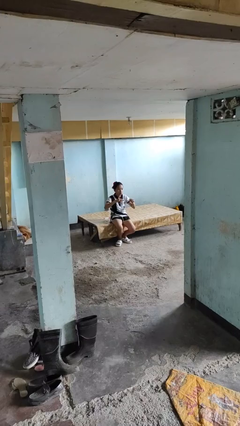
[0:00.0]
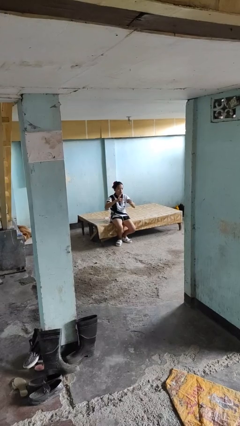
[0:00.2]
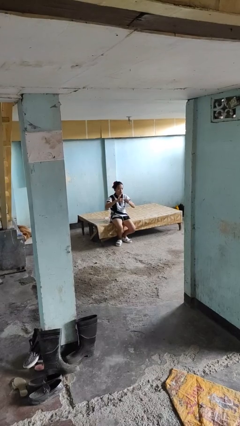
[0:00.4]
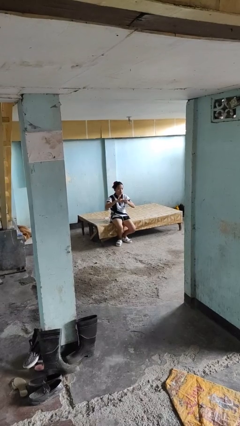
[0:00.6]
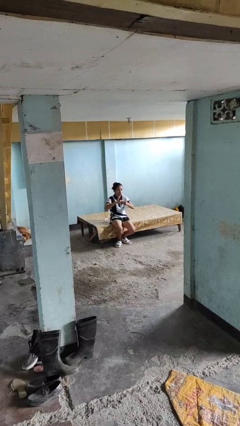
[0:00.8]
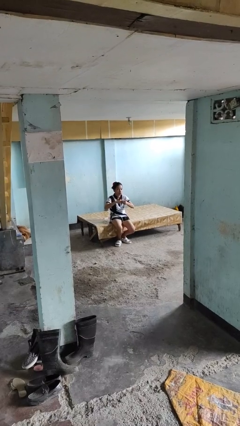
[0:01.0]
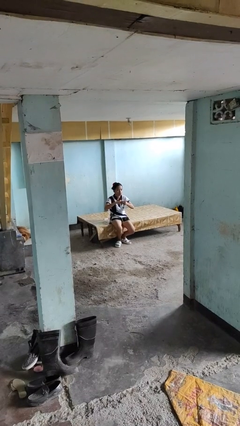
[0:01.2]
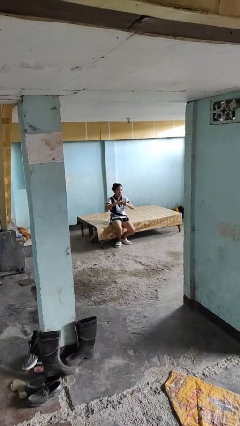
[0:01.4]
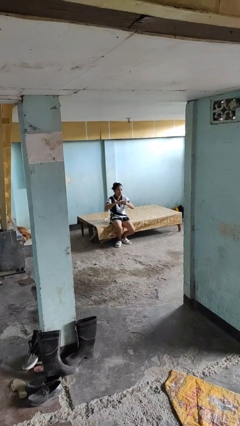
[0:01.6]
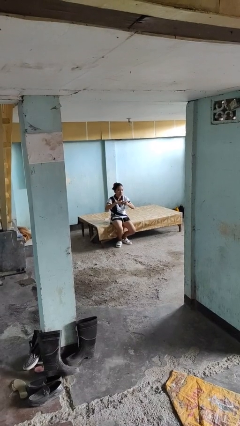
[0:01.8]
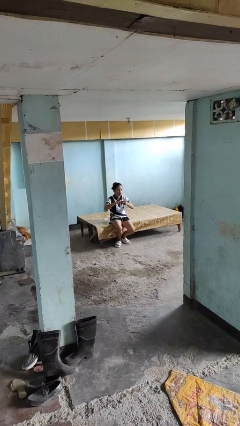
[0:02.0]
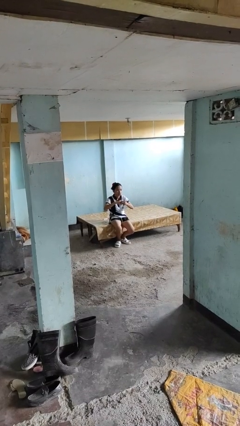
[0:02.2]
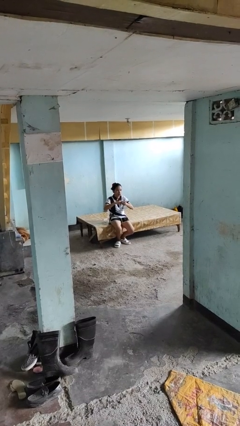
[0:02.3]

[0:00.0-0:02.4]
person puts on ring

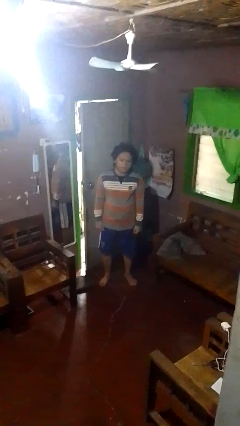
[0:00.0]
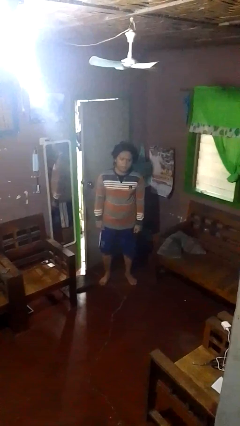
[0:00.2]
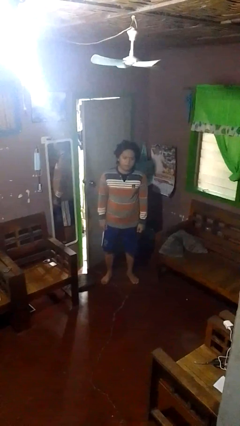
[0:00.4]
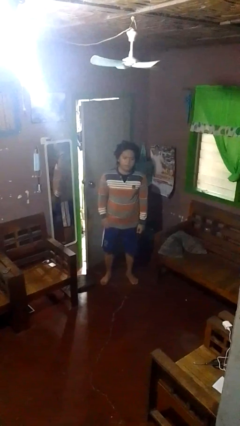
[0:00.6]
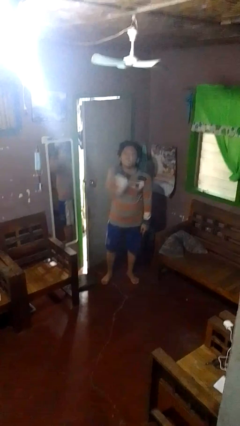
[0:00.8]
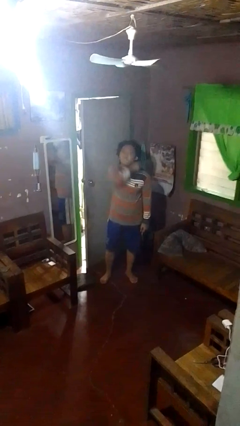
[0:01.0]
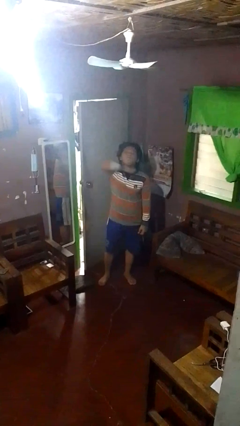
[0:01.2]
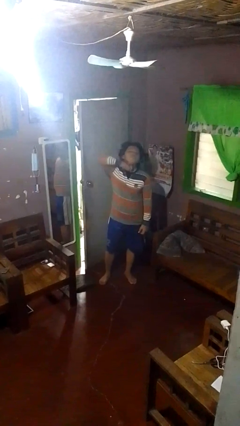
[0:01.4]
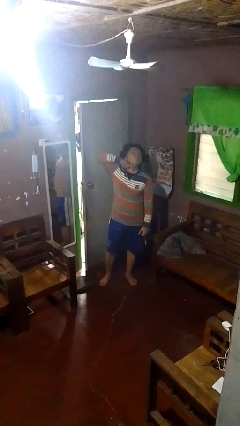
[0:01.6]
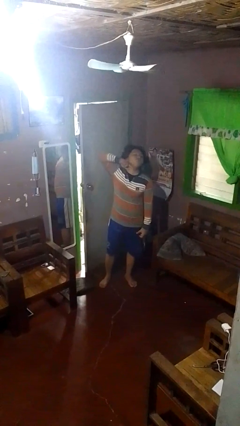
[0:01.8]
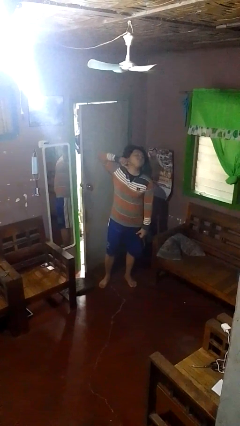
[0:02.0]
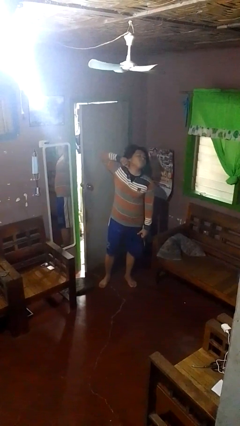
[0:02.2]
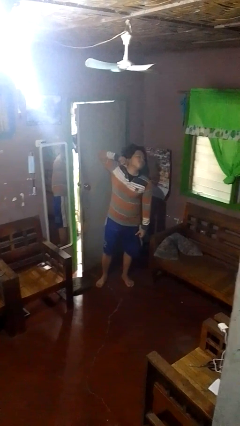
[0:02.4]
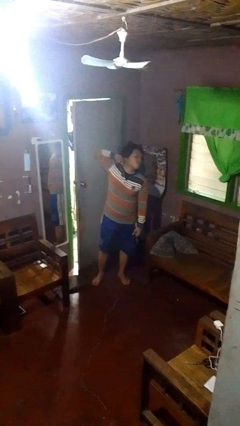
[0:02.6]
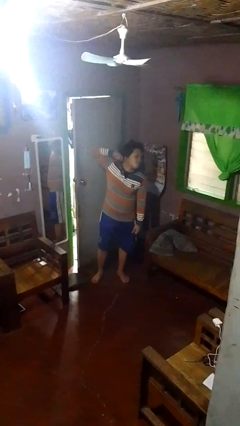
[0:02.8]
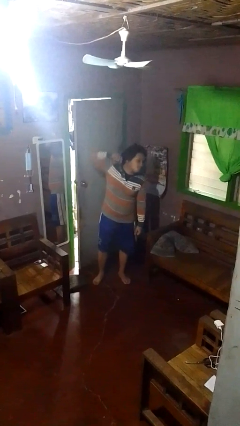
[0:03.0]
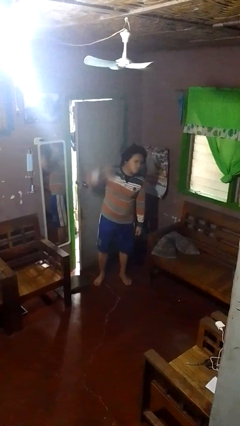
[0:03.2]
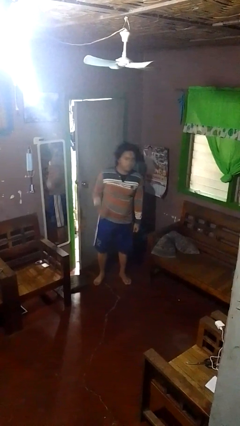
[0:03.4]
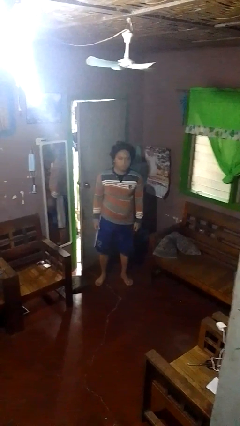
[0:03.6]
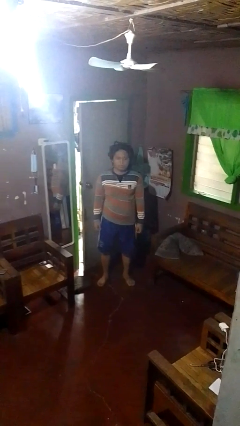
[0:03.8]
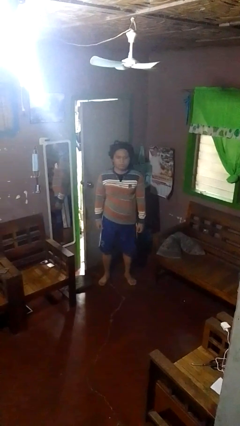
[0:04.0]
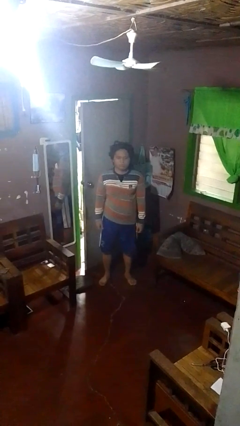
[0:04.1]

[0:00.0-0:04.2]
person dries hair with hairdryer

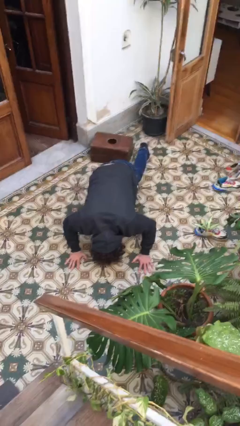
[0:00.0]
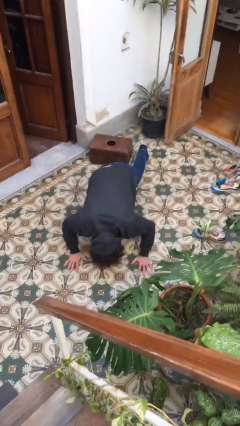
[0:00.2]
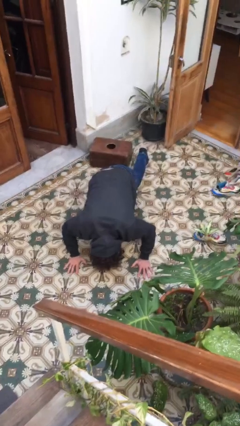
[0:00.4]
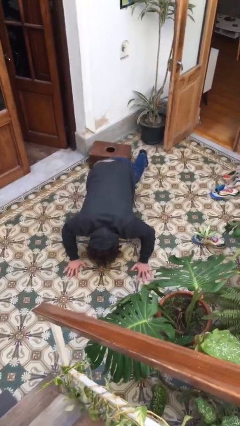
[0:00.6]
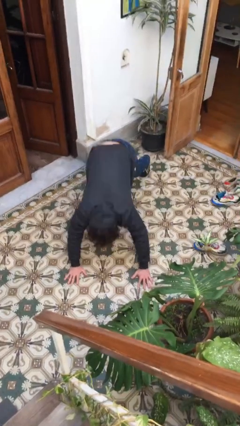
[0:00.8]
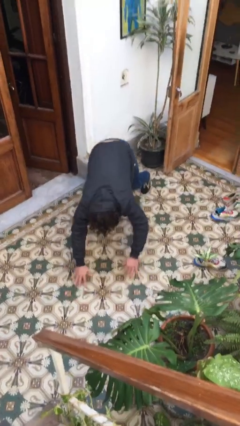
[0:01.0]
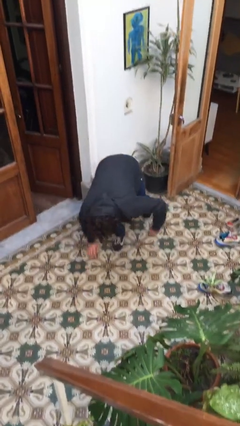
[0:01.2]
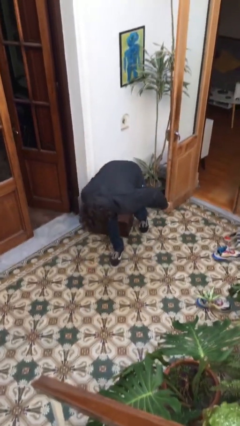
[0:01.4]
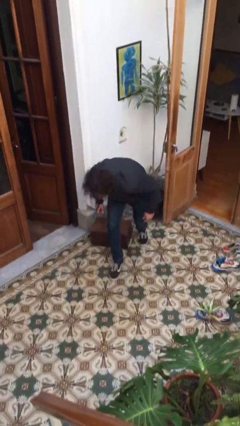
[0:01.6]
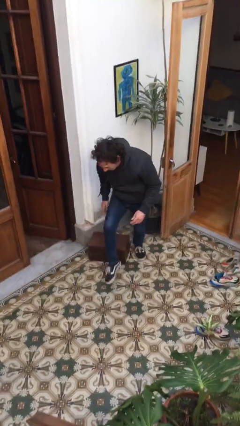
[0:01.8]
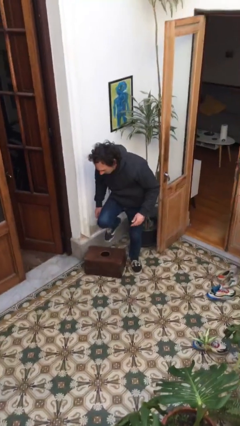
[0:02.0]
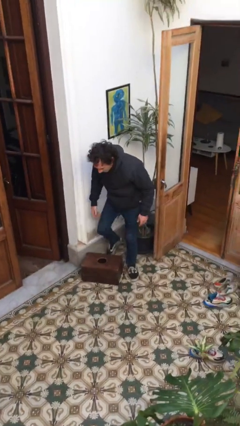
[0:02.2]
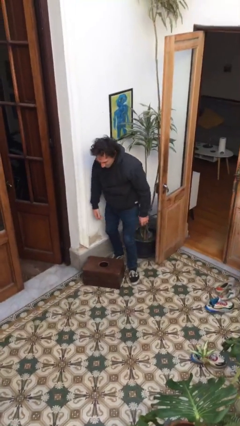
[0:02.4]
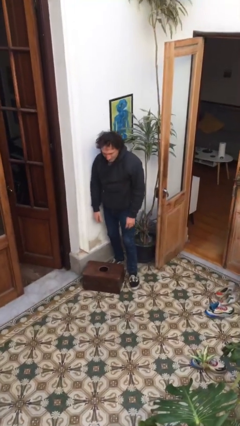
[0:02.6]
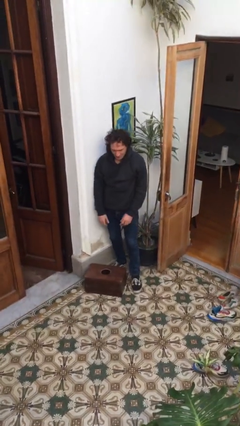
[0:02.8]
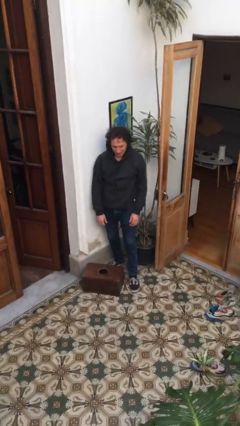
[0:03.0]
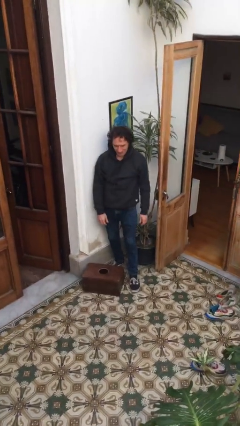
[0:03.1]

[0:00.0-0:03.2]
person stands up from floor

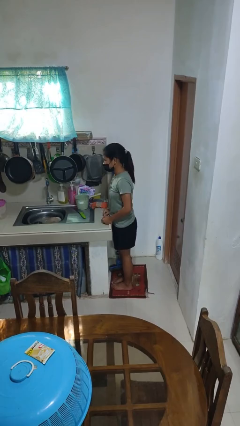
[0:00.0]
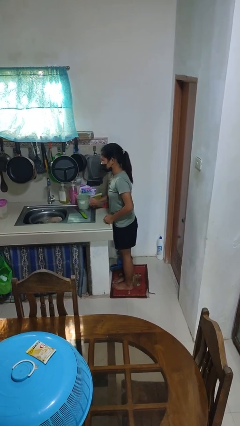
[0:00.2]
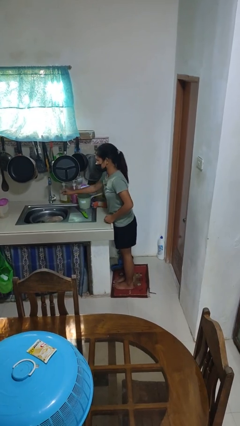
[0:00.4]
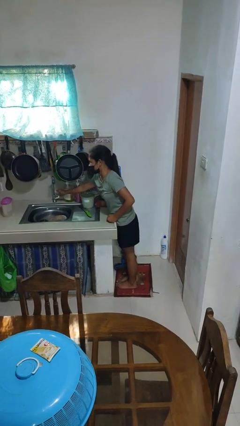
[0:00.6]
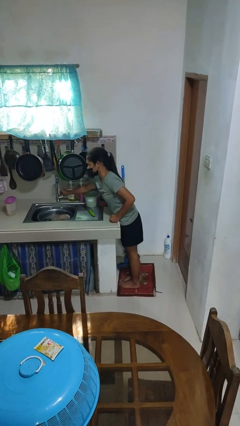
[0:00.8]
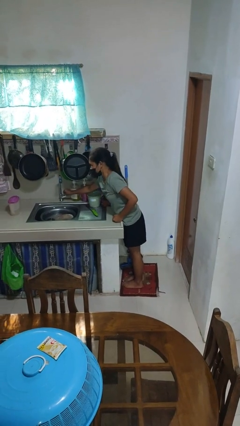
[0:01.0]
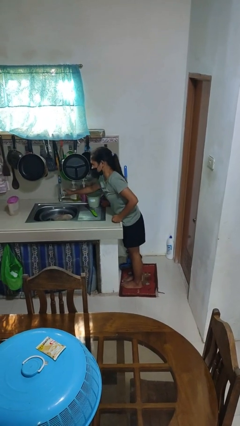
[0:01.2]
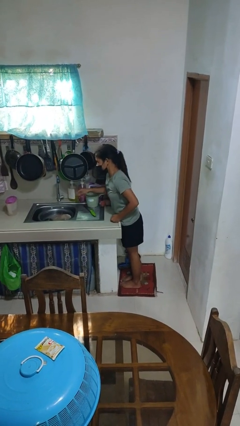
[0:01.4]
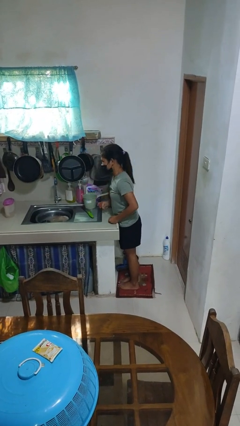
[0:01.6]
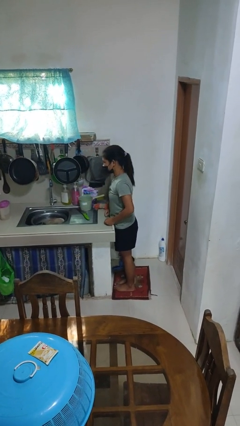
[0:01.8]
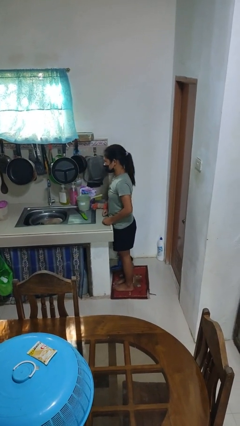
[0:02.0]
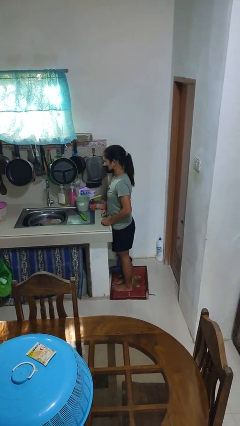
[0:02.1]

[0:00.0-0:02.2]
person turns on faucet

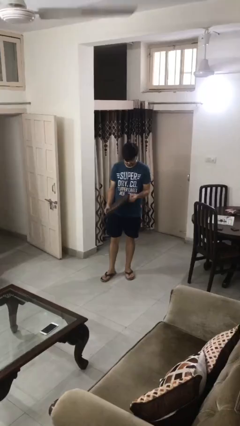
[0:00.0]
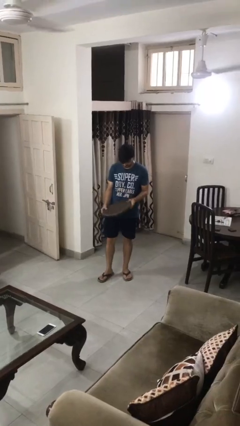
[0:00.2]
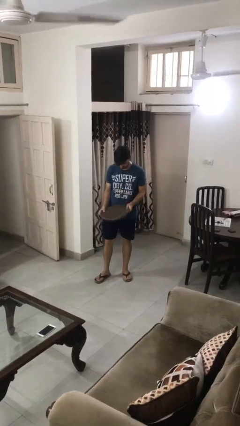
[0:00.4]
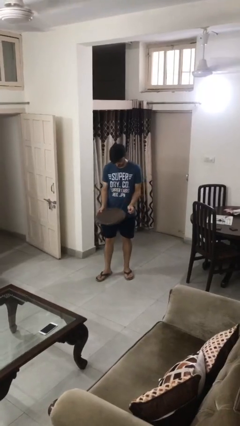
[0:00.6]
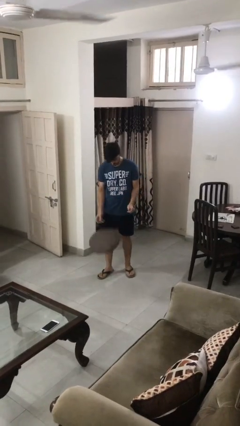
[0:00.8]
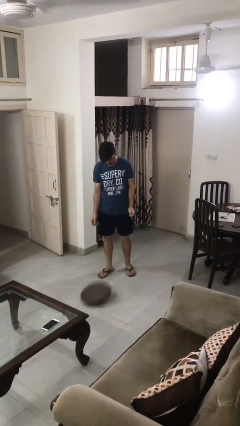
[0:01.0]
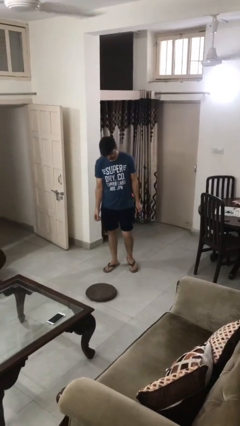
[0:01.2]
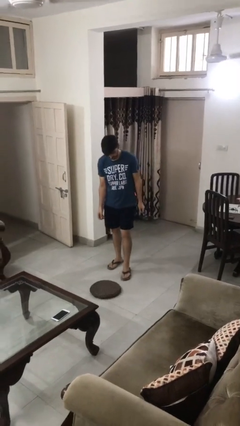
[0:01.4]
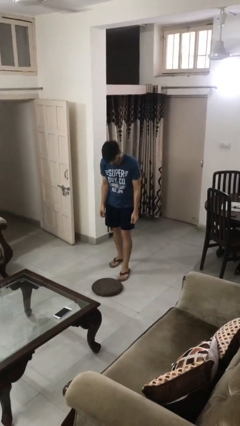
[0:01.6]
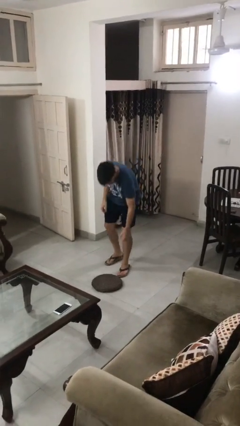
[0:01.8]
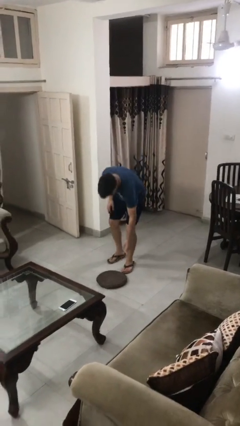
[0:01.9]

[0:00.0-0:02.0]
person drops object

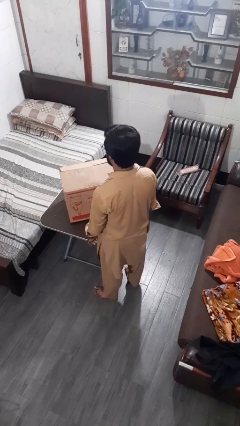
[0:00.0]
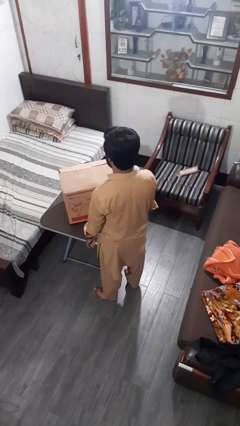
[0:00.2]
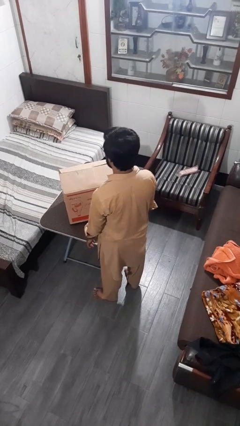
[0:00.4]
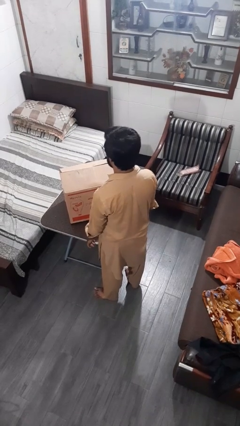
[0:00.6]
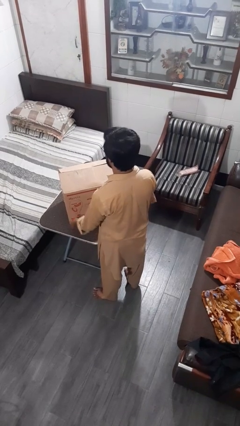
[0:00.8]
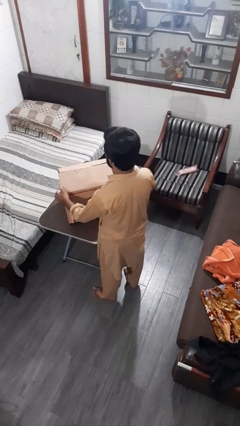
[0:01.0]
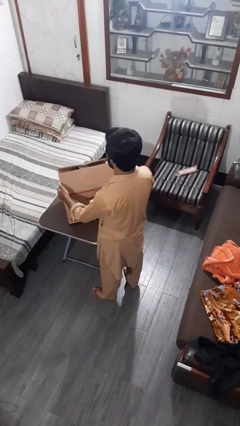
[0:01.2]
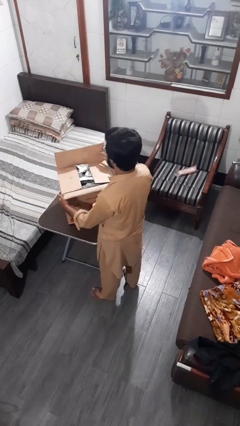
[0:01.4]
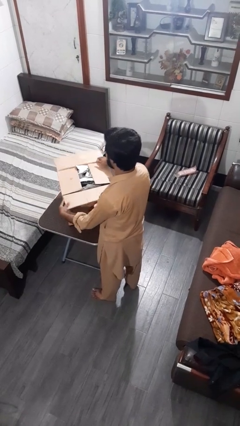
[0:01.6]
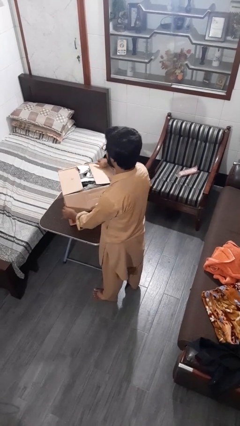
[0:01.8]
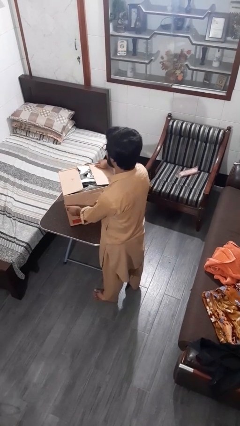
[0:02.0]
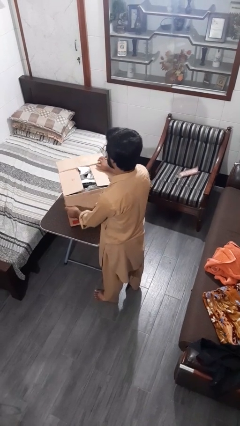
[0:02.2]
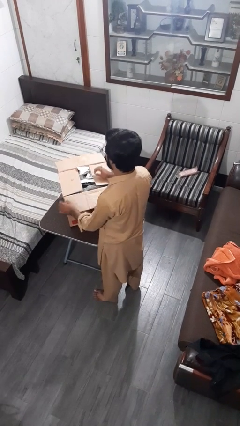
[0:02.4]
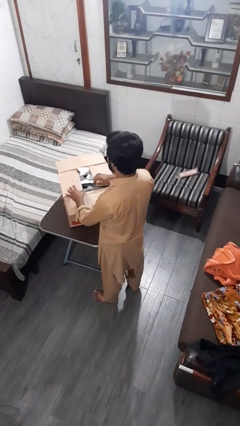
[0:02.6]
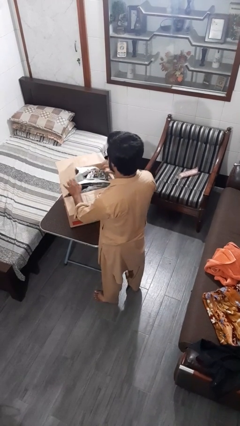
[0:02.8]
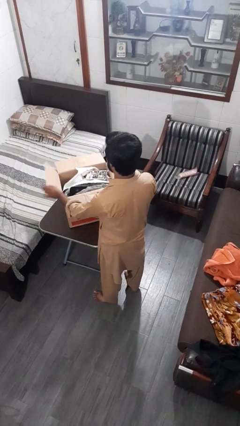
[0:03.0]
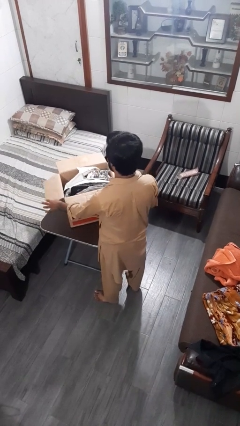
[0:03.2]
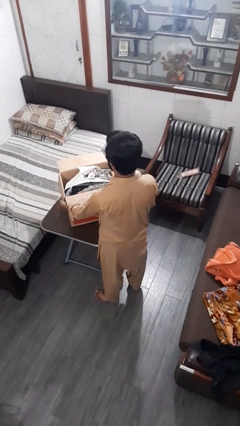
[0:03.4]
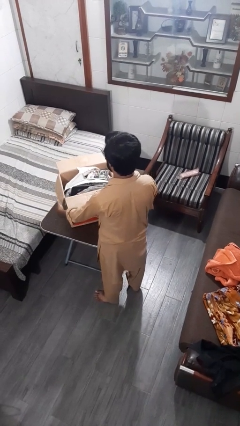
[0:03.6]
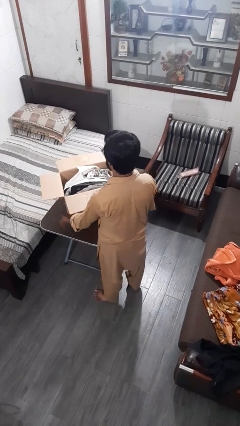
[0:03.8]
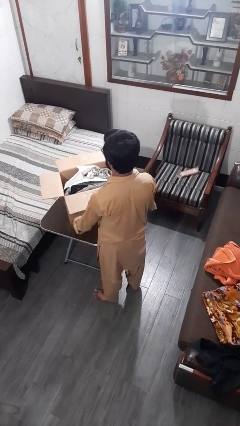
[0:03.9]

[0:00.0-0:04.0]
person opens box
